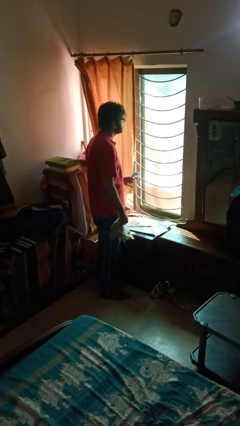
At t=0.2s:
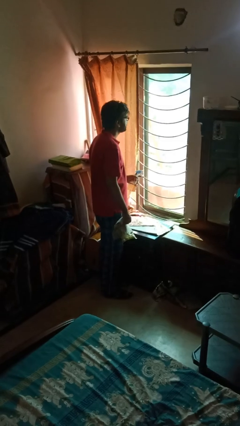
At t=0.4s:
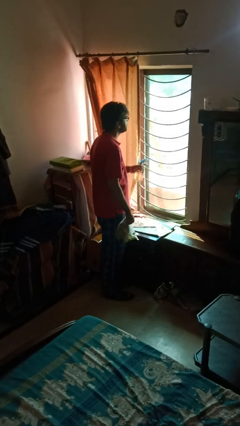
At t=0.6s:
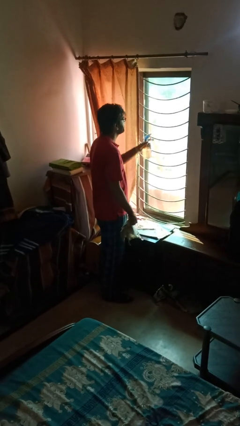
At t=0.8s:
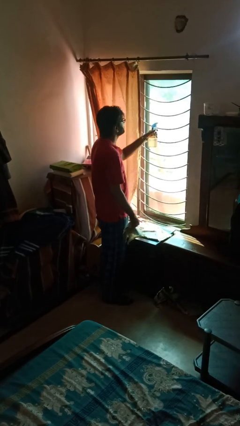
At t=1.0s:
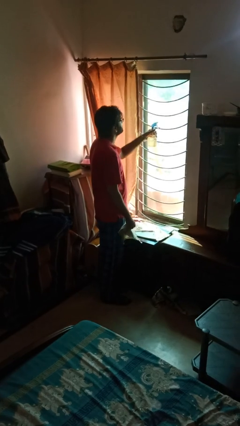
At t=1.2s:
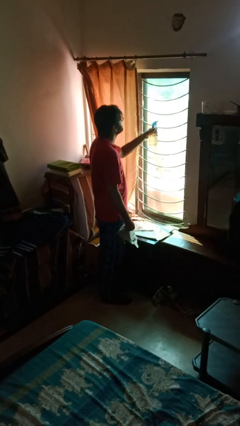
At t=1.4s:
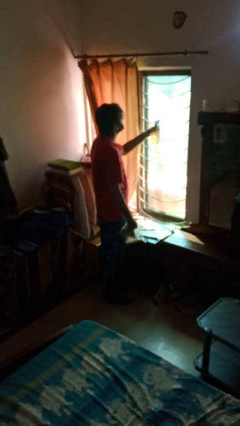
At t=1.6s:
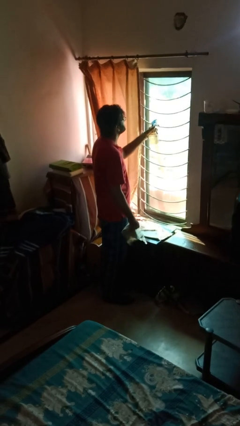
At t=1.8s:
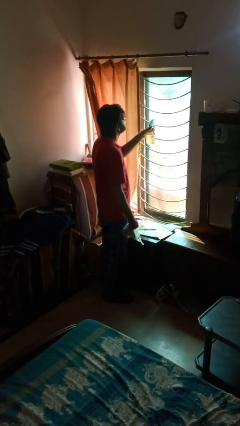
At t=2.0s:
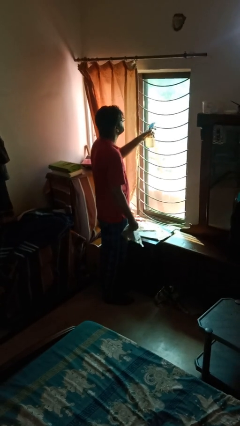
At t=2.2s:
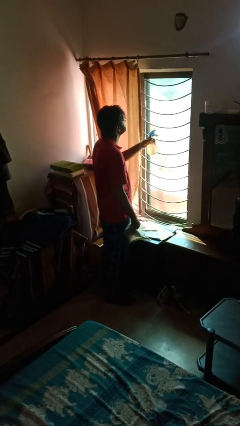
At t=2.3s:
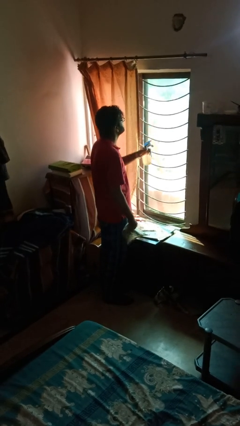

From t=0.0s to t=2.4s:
person sprays from bottle

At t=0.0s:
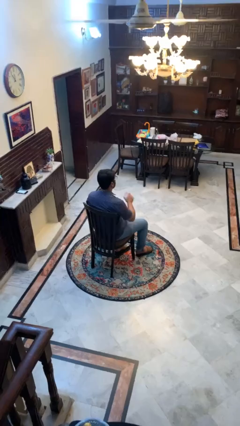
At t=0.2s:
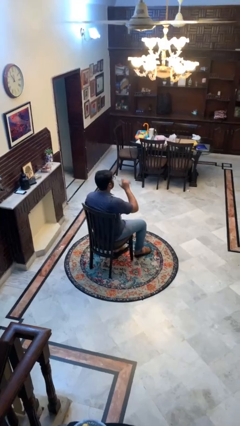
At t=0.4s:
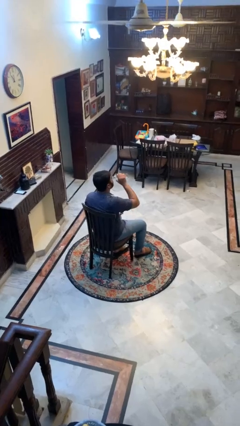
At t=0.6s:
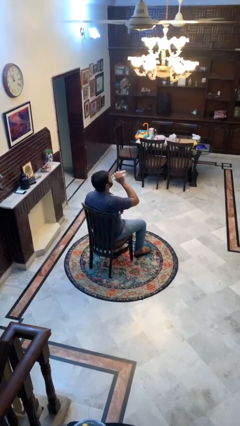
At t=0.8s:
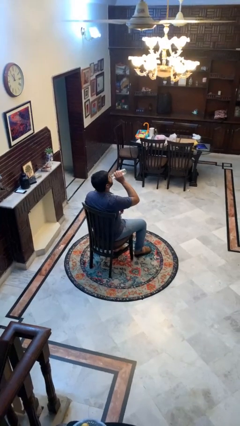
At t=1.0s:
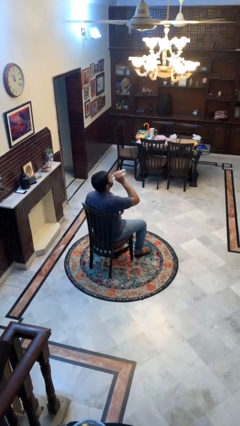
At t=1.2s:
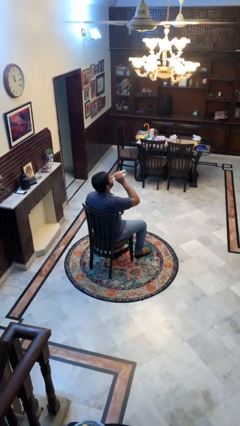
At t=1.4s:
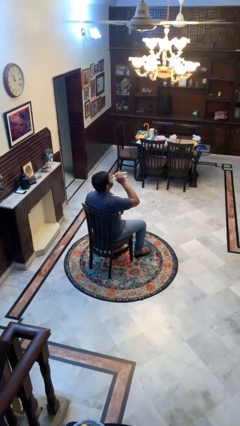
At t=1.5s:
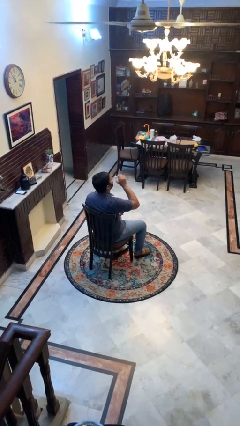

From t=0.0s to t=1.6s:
person drinks from bottle

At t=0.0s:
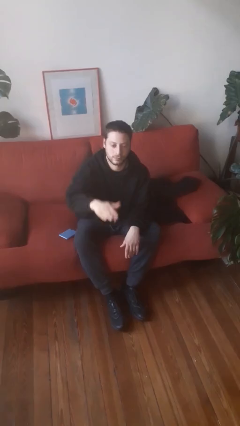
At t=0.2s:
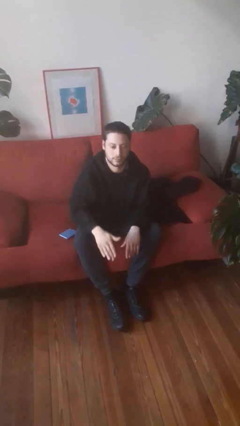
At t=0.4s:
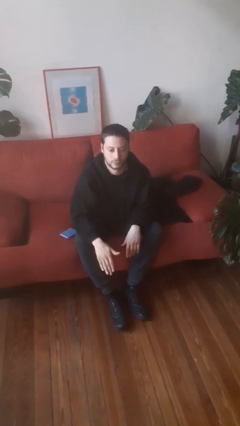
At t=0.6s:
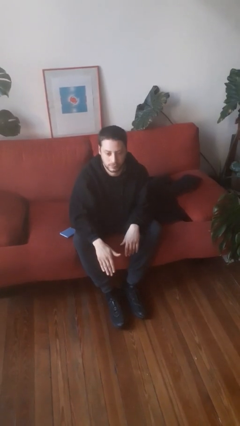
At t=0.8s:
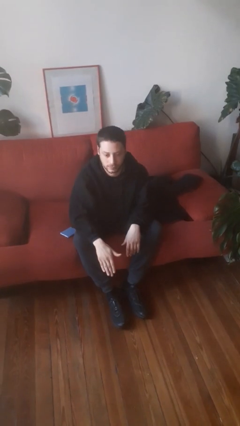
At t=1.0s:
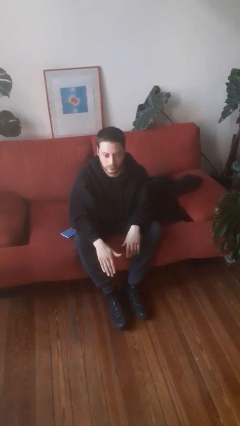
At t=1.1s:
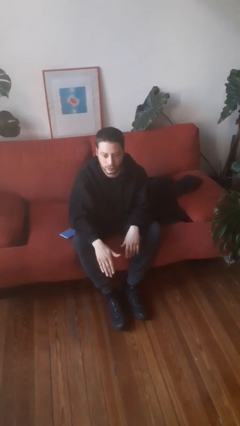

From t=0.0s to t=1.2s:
person gestures swipe down

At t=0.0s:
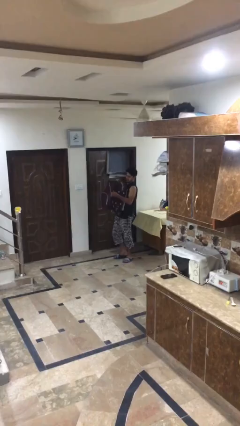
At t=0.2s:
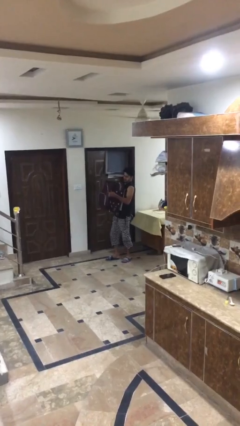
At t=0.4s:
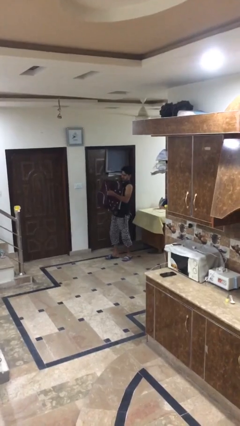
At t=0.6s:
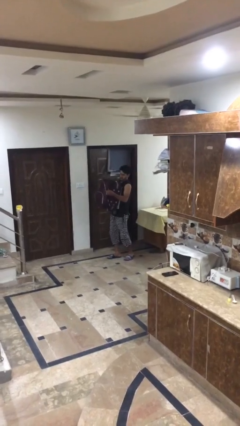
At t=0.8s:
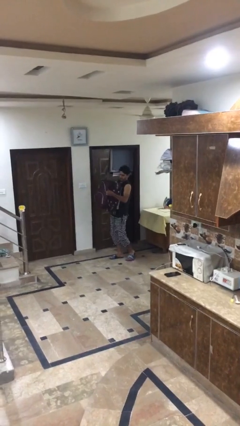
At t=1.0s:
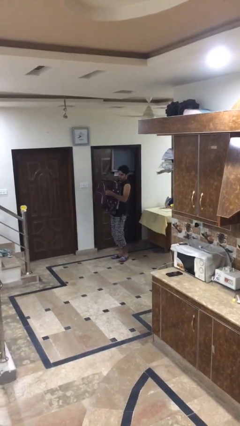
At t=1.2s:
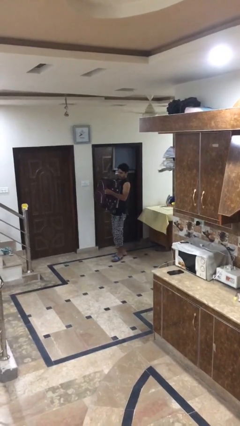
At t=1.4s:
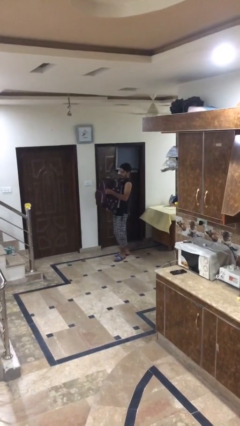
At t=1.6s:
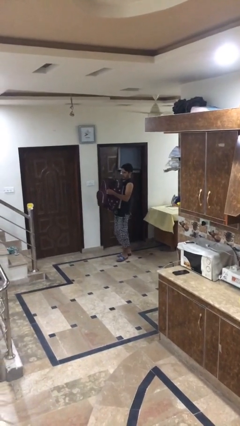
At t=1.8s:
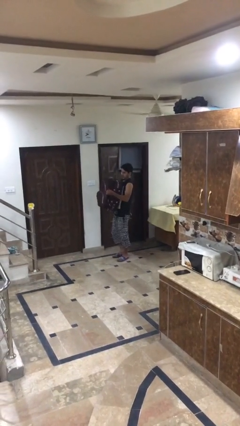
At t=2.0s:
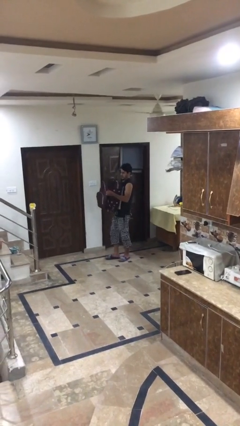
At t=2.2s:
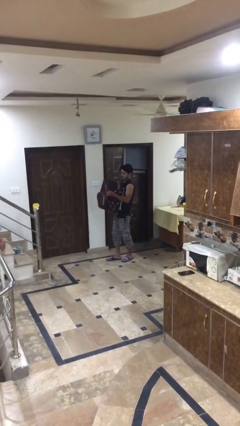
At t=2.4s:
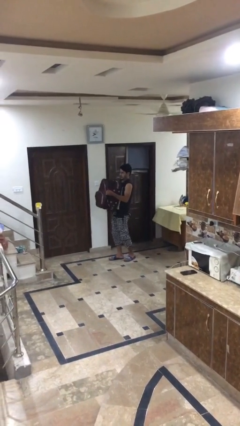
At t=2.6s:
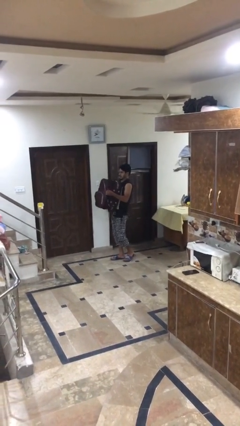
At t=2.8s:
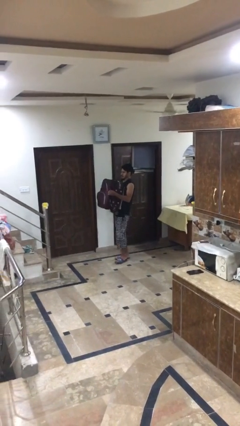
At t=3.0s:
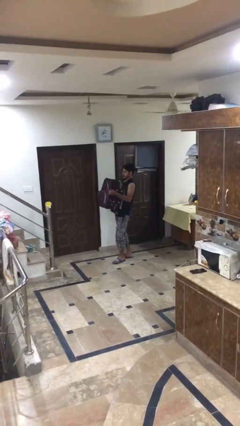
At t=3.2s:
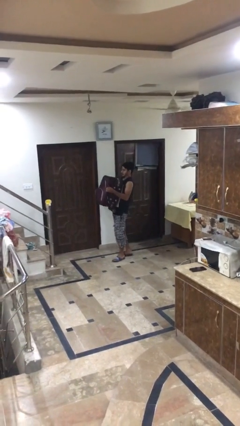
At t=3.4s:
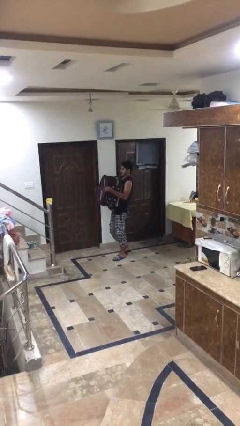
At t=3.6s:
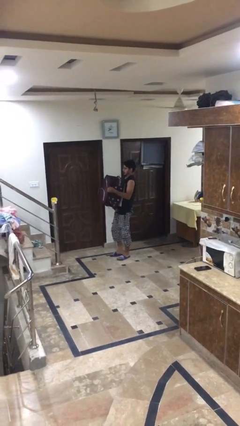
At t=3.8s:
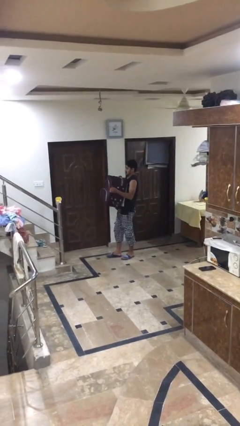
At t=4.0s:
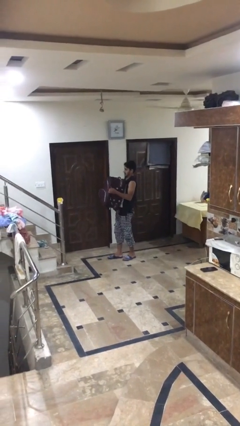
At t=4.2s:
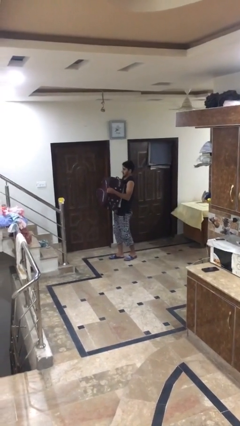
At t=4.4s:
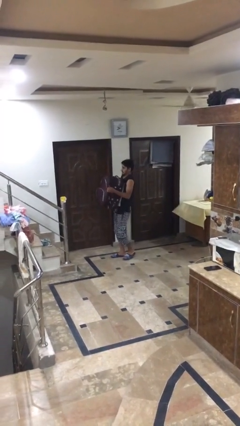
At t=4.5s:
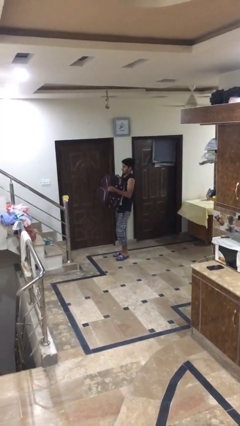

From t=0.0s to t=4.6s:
person carries heavy object

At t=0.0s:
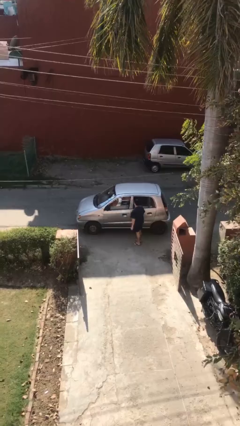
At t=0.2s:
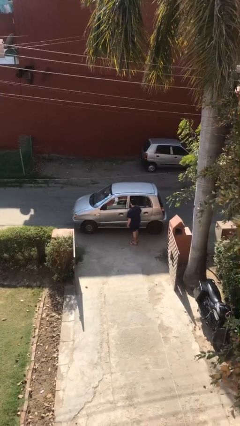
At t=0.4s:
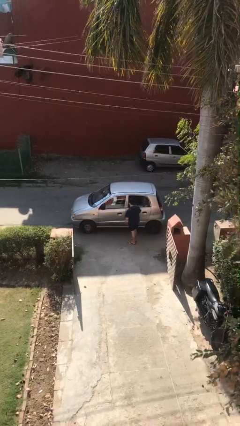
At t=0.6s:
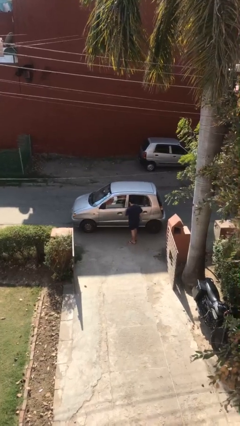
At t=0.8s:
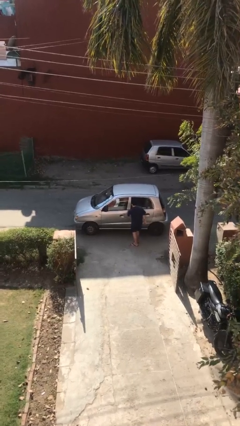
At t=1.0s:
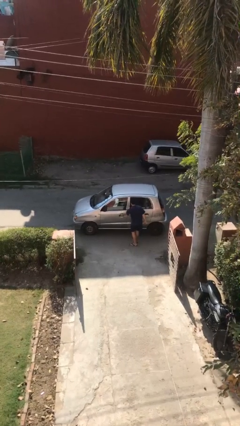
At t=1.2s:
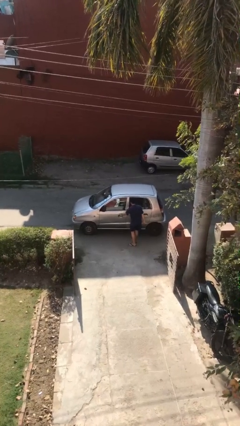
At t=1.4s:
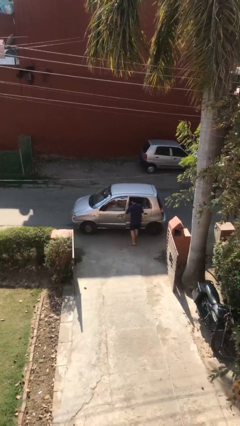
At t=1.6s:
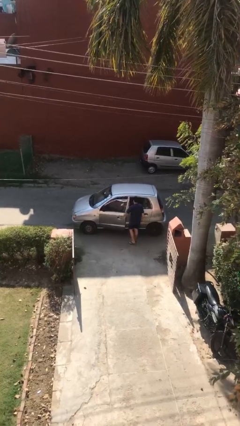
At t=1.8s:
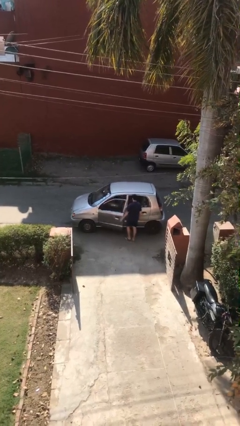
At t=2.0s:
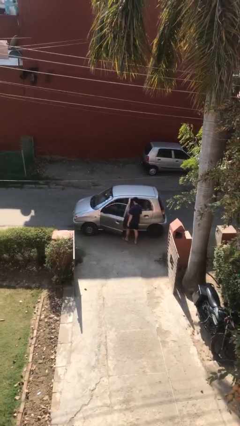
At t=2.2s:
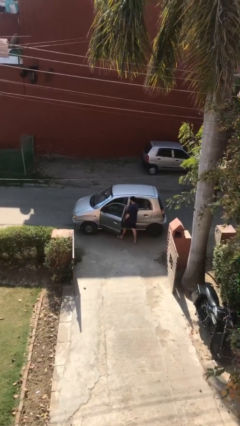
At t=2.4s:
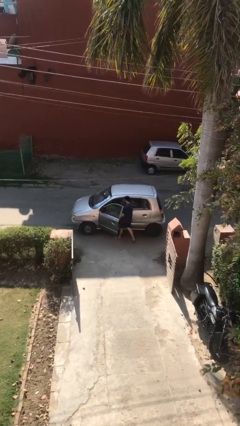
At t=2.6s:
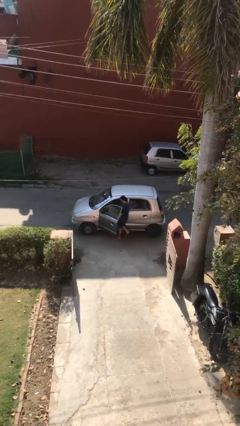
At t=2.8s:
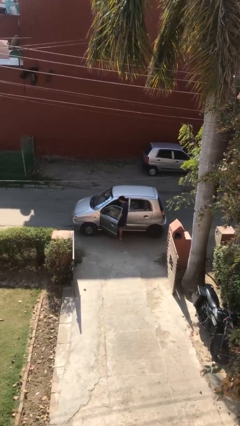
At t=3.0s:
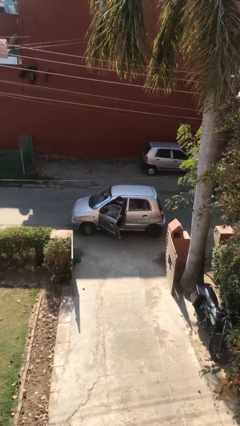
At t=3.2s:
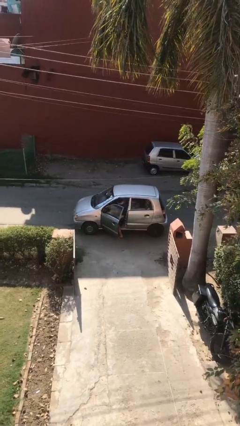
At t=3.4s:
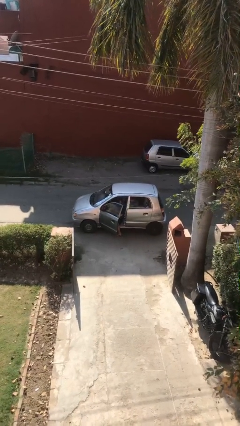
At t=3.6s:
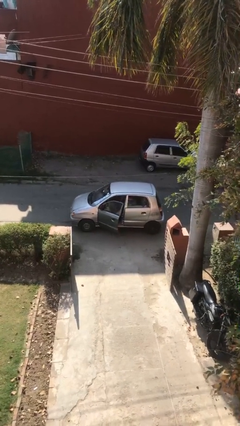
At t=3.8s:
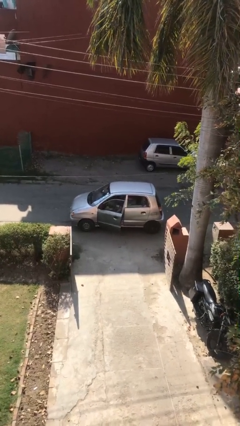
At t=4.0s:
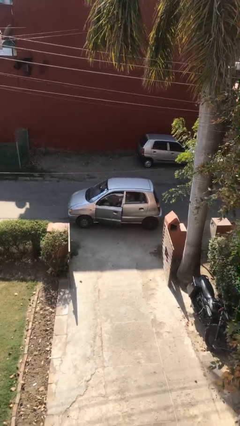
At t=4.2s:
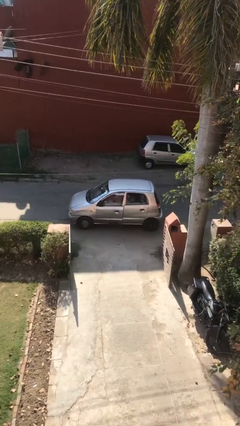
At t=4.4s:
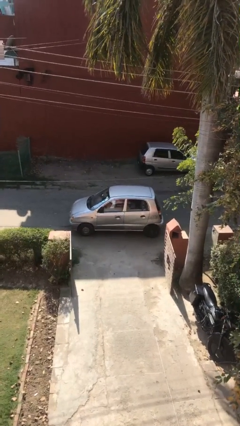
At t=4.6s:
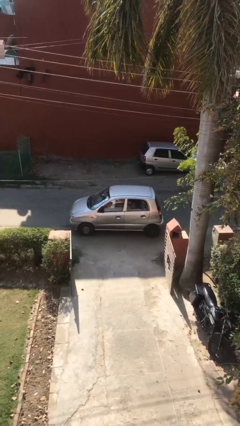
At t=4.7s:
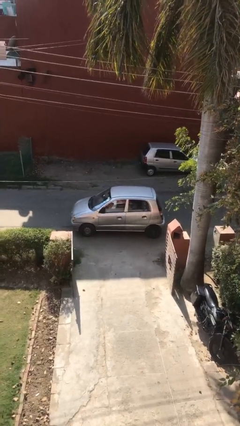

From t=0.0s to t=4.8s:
car picks up person

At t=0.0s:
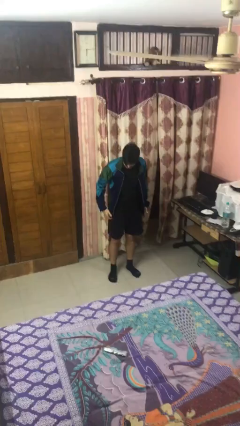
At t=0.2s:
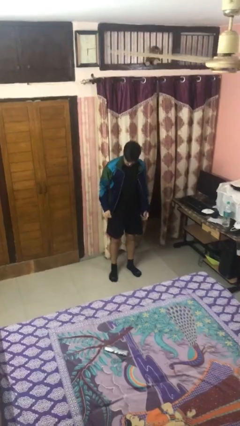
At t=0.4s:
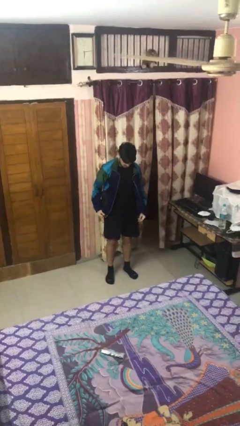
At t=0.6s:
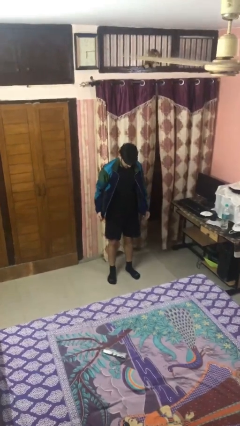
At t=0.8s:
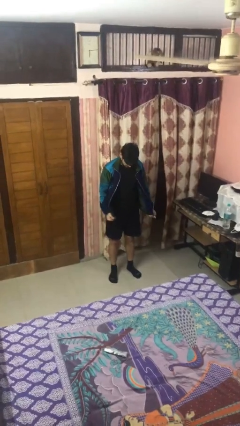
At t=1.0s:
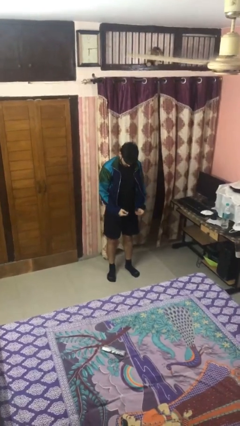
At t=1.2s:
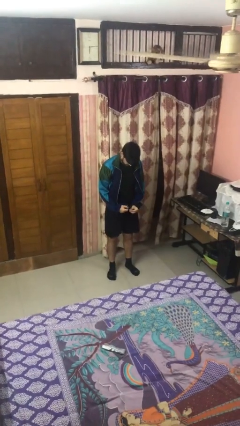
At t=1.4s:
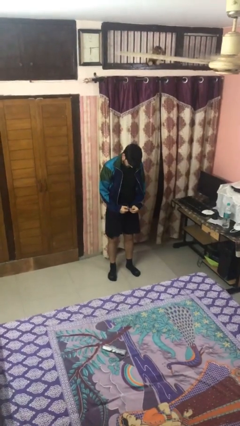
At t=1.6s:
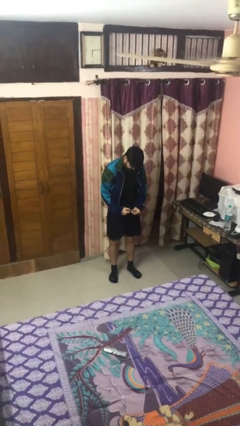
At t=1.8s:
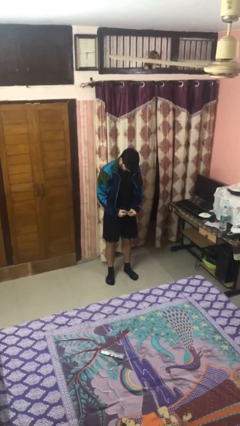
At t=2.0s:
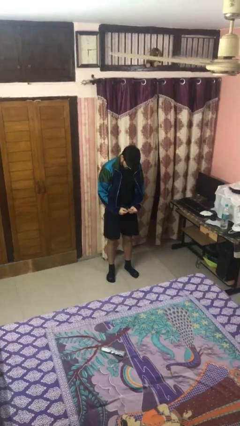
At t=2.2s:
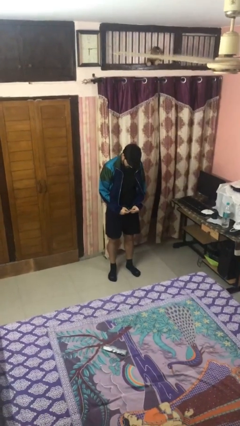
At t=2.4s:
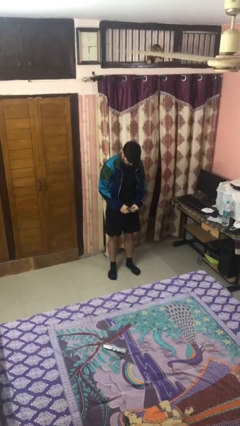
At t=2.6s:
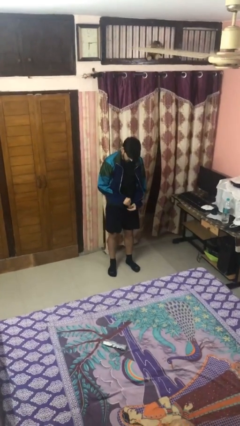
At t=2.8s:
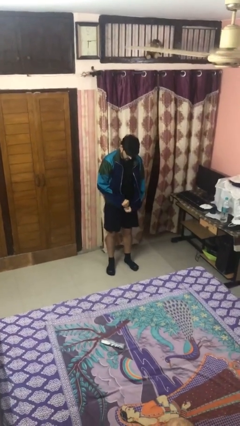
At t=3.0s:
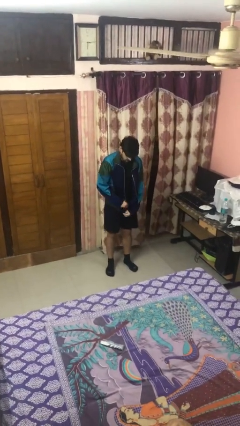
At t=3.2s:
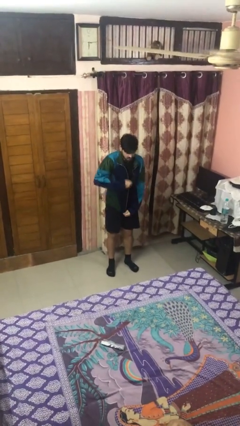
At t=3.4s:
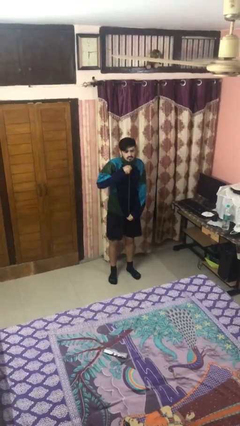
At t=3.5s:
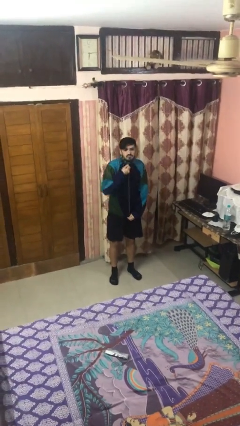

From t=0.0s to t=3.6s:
person zips up jacket
